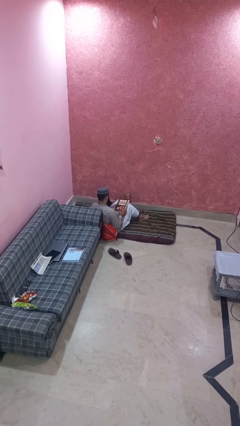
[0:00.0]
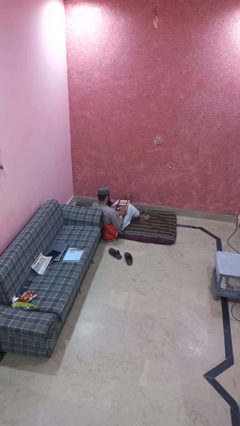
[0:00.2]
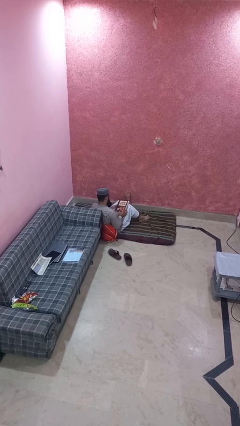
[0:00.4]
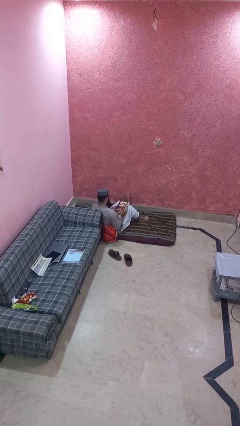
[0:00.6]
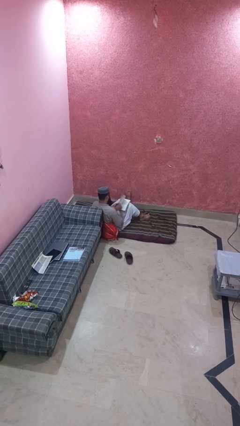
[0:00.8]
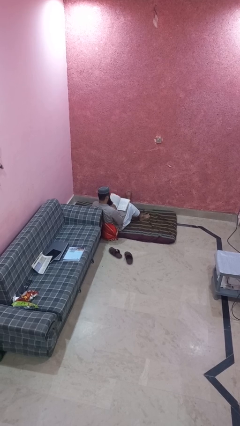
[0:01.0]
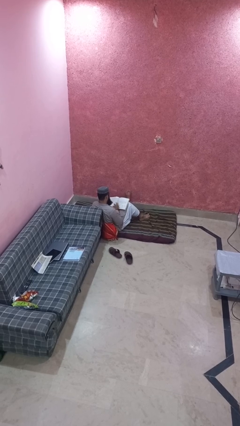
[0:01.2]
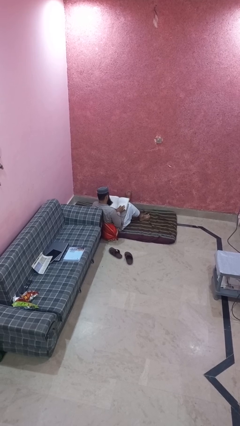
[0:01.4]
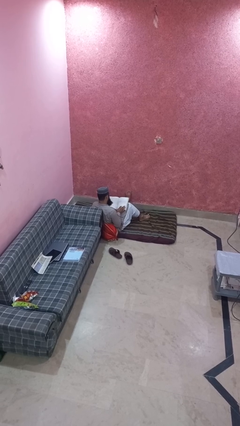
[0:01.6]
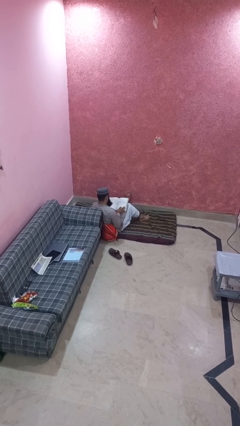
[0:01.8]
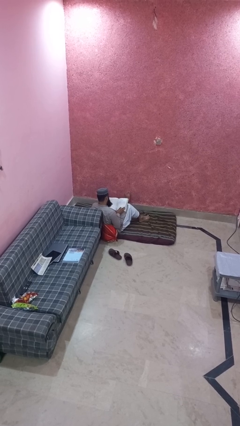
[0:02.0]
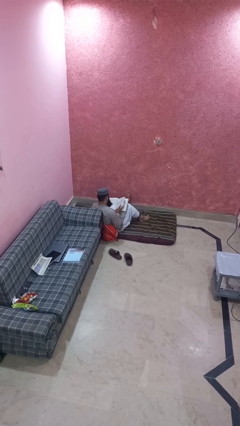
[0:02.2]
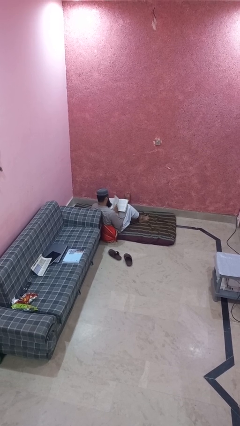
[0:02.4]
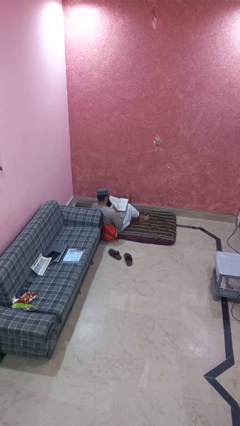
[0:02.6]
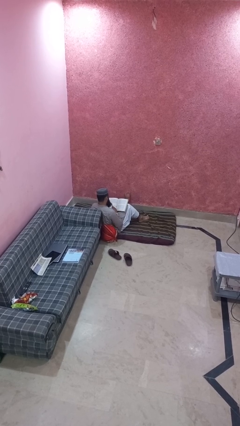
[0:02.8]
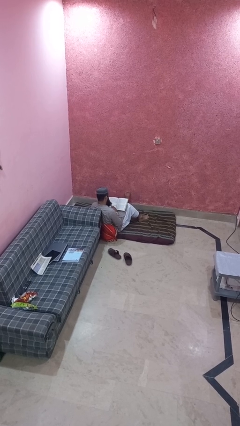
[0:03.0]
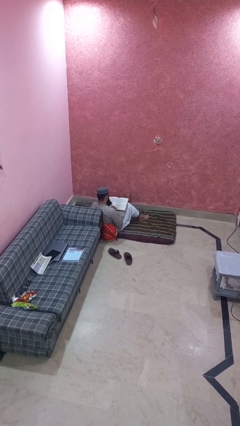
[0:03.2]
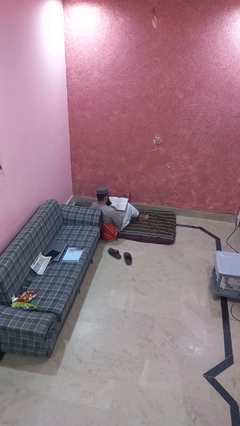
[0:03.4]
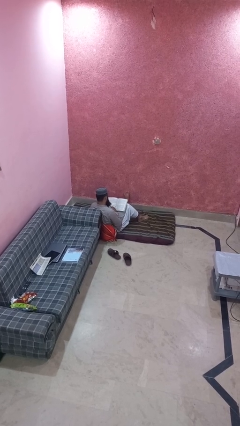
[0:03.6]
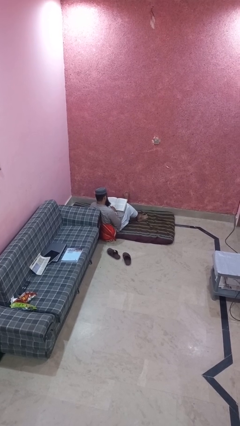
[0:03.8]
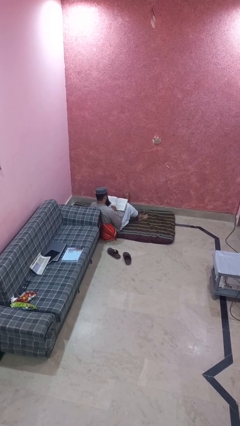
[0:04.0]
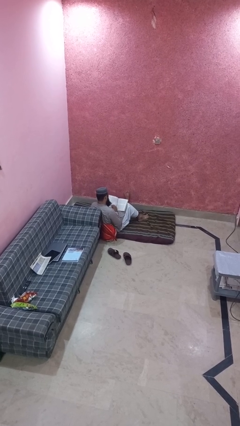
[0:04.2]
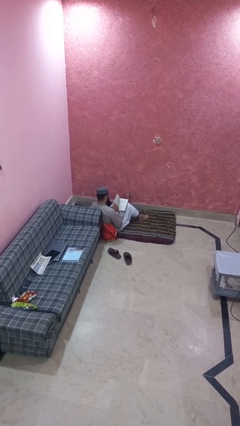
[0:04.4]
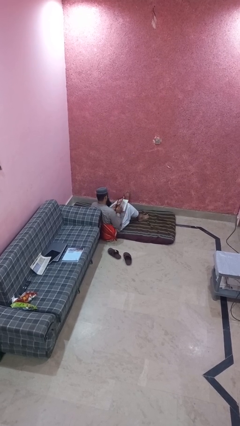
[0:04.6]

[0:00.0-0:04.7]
person reads book

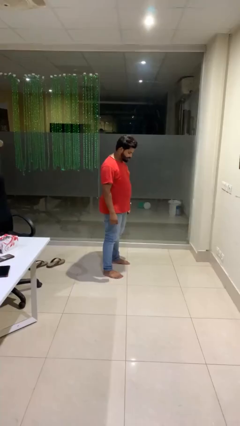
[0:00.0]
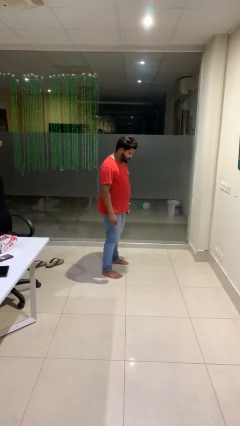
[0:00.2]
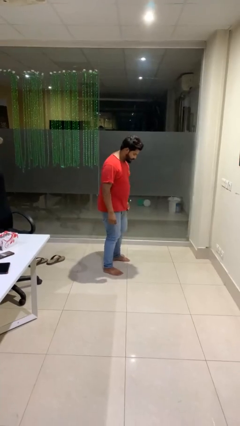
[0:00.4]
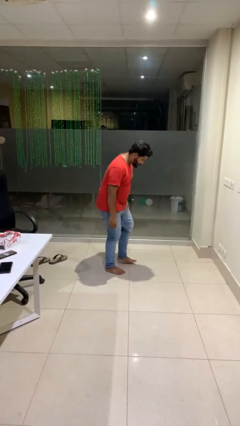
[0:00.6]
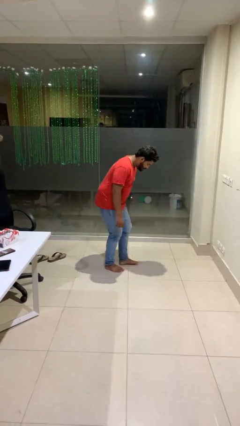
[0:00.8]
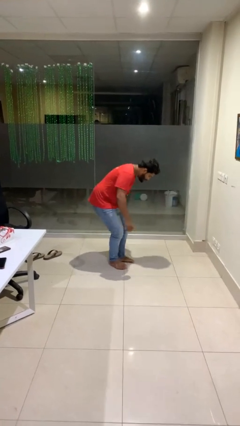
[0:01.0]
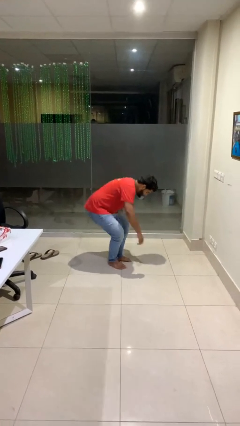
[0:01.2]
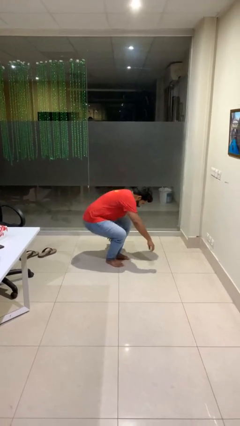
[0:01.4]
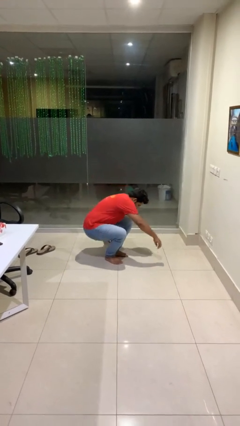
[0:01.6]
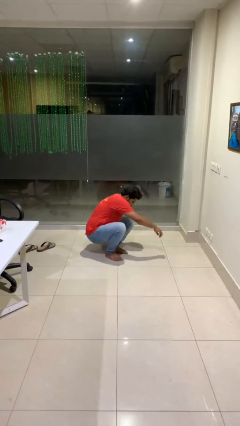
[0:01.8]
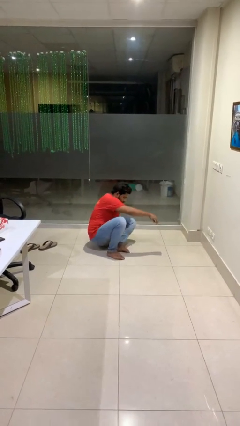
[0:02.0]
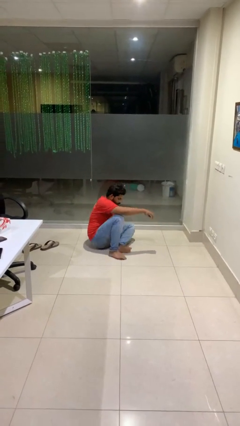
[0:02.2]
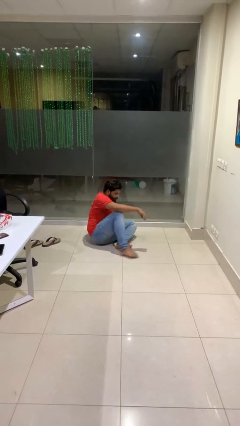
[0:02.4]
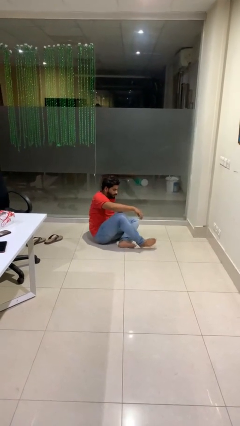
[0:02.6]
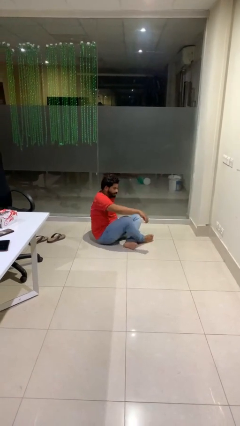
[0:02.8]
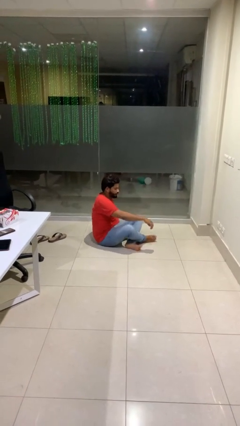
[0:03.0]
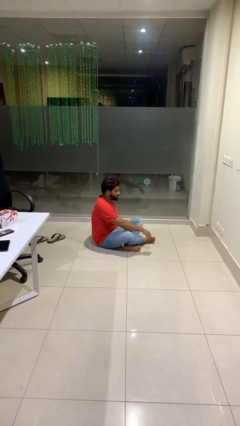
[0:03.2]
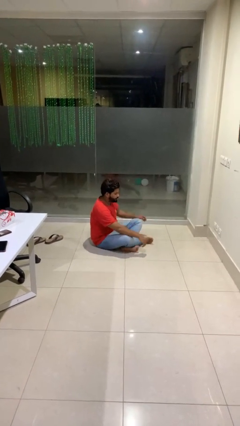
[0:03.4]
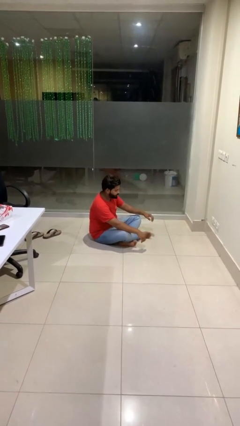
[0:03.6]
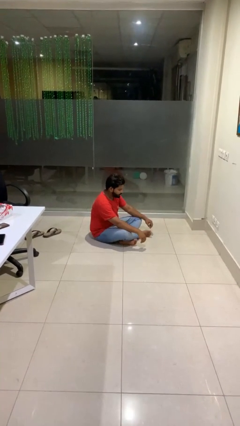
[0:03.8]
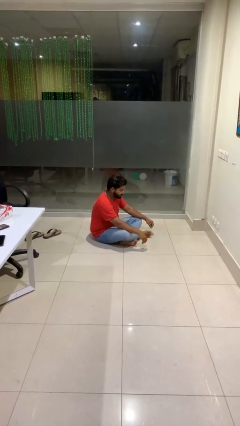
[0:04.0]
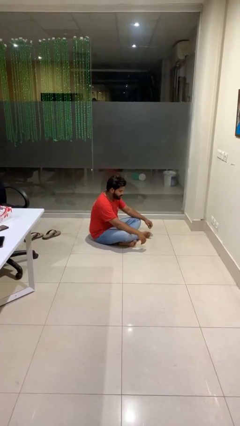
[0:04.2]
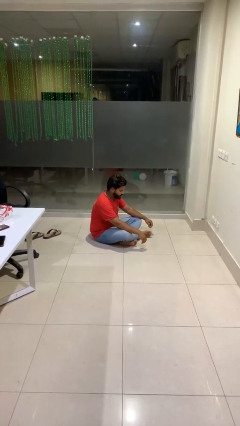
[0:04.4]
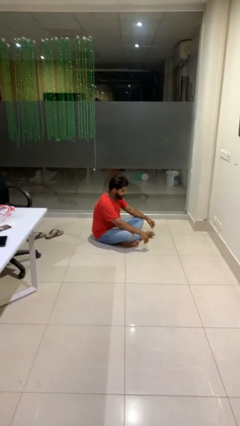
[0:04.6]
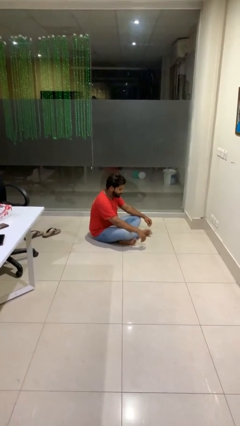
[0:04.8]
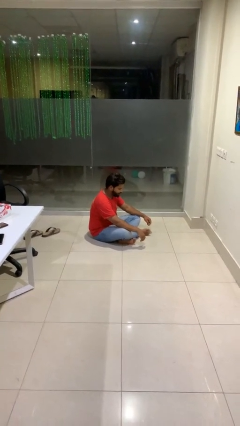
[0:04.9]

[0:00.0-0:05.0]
person sits crisscross

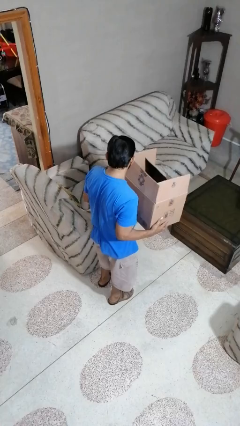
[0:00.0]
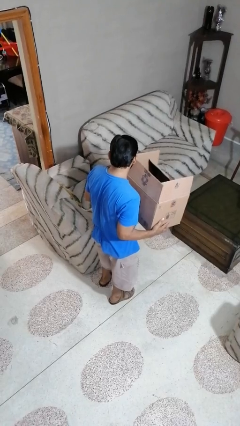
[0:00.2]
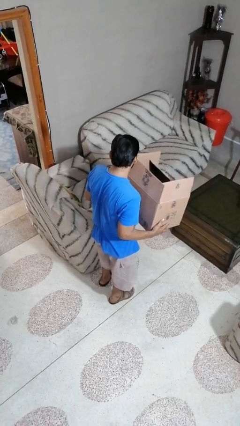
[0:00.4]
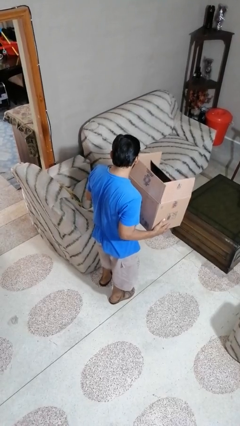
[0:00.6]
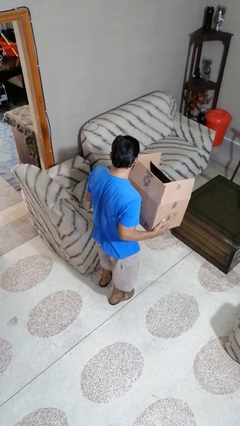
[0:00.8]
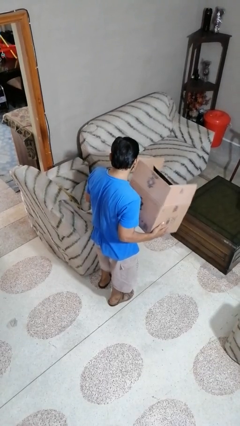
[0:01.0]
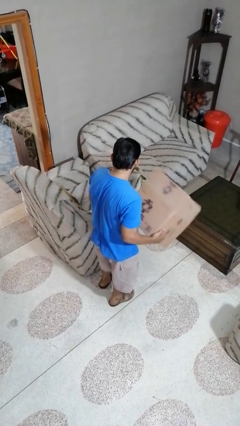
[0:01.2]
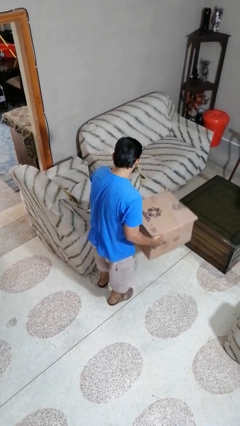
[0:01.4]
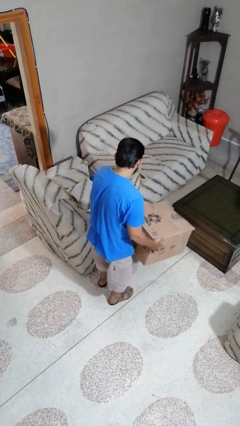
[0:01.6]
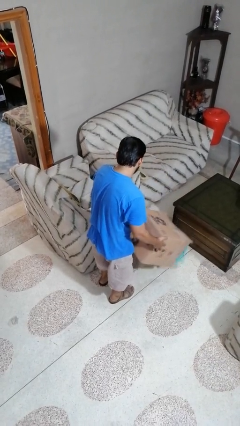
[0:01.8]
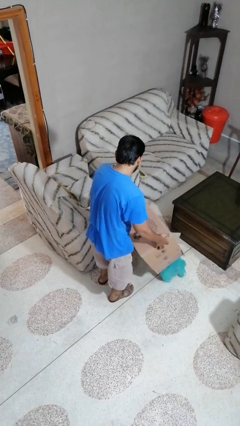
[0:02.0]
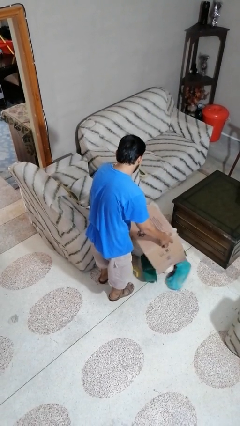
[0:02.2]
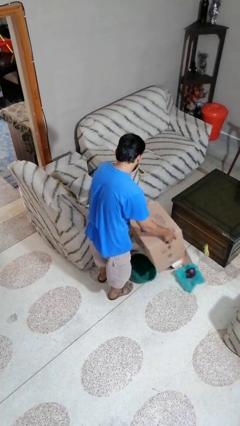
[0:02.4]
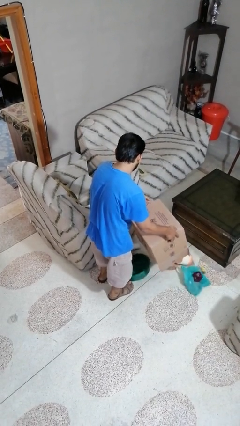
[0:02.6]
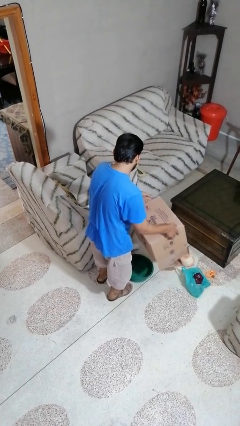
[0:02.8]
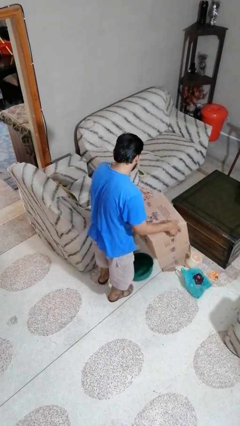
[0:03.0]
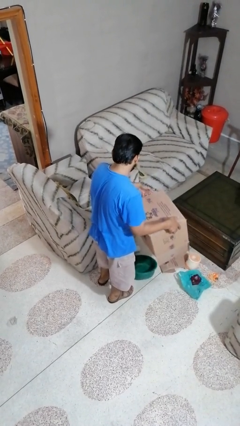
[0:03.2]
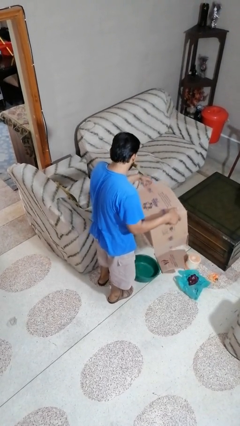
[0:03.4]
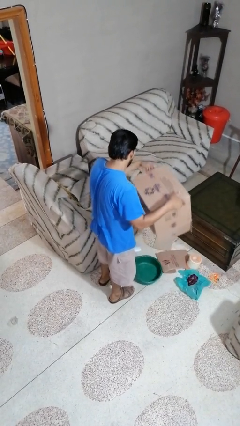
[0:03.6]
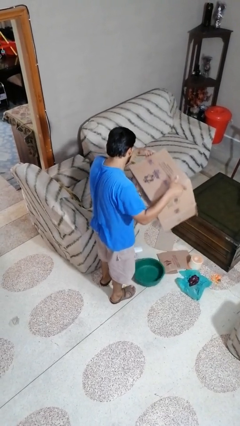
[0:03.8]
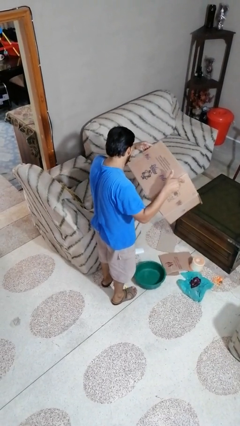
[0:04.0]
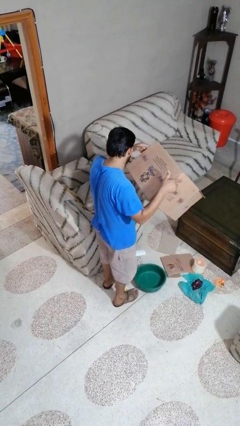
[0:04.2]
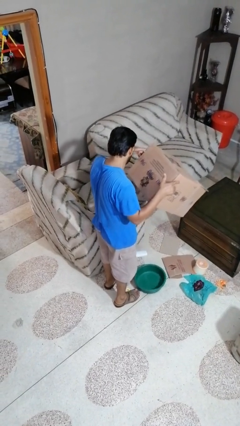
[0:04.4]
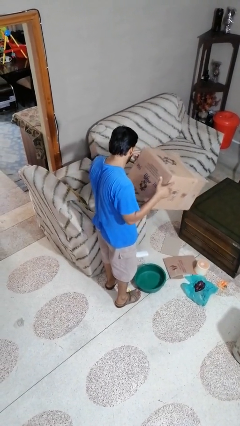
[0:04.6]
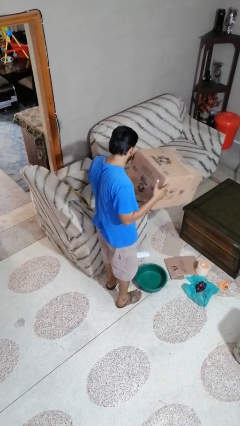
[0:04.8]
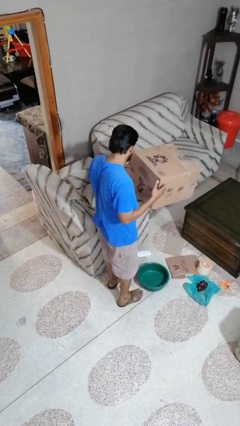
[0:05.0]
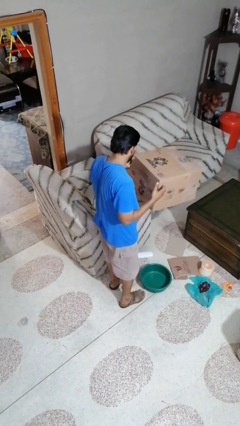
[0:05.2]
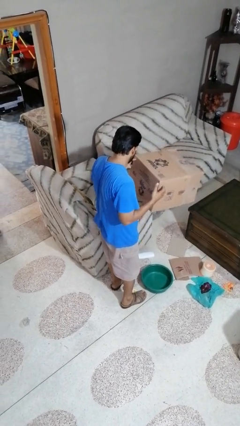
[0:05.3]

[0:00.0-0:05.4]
person unloads box onto floor

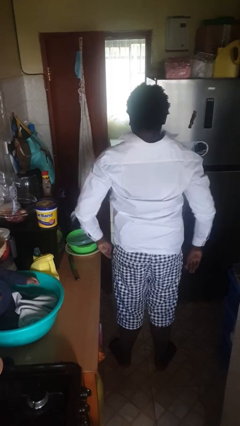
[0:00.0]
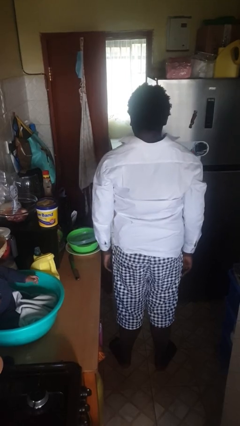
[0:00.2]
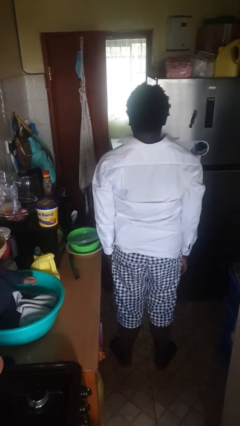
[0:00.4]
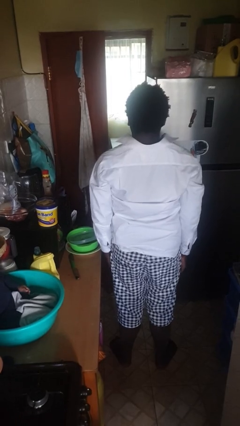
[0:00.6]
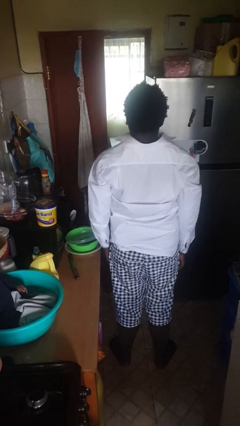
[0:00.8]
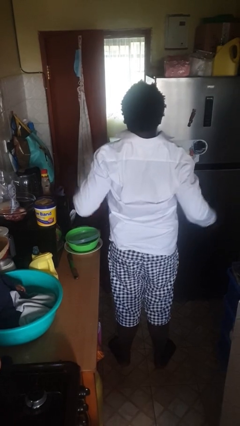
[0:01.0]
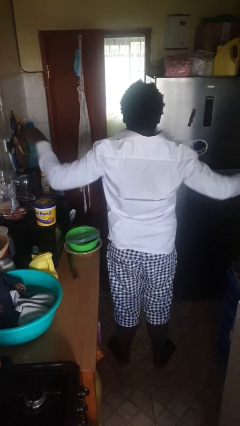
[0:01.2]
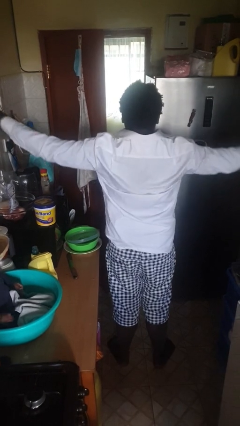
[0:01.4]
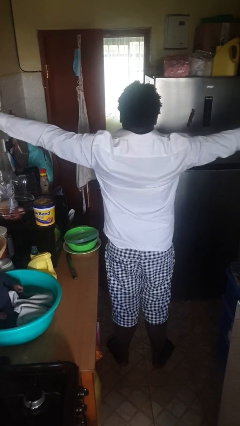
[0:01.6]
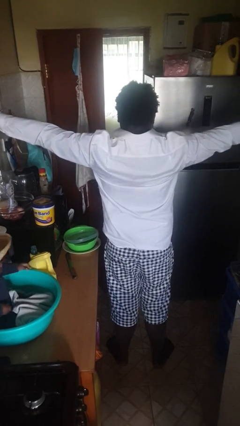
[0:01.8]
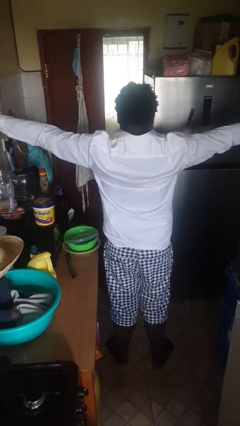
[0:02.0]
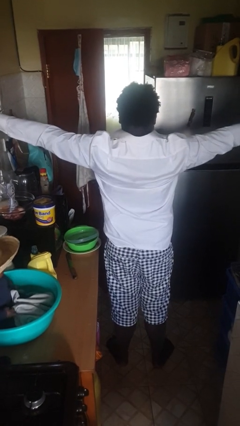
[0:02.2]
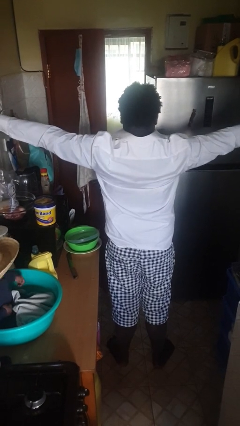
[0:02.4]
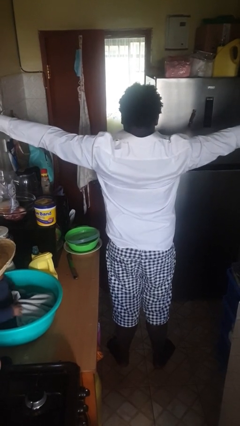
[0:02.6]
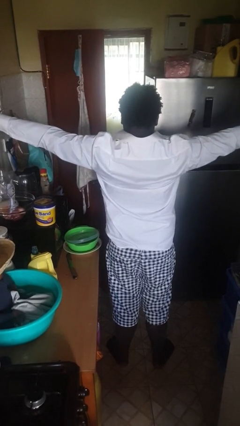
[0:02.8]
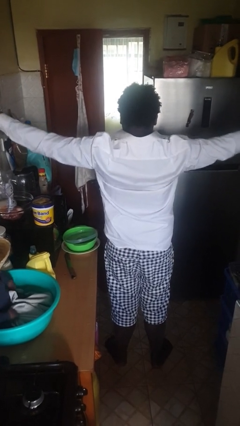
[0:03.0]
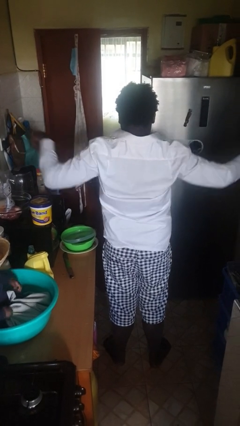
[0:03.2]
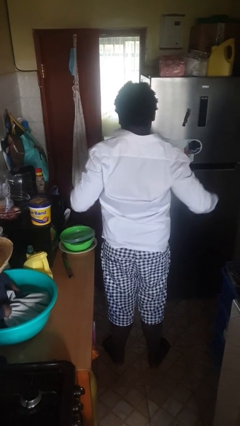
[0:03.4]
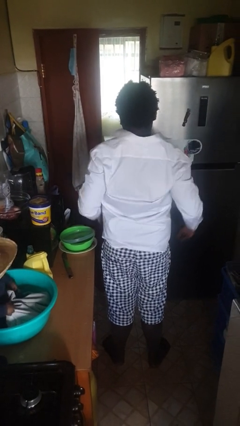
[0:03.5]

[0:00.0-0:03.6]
person stretches arms to side
